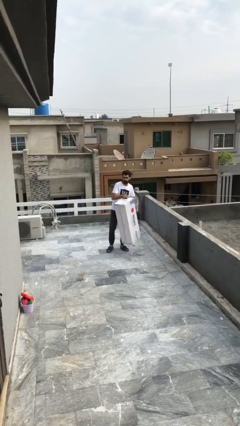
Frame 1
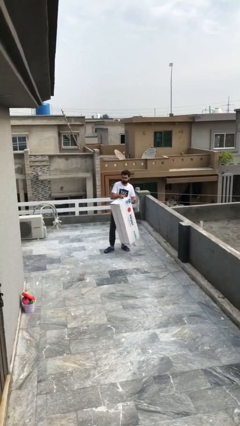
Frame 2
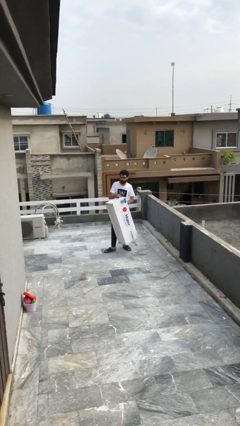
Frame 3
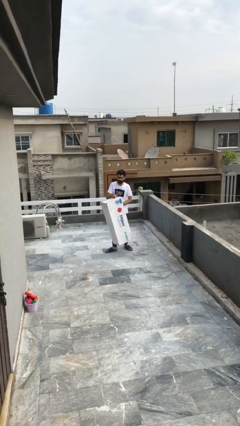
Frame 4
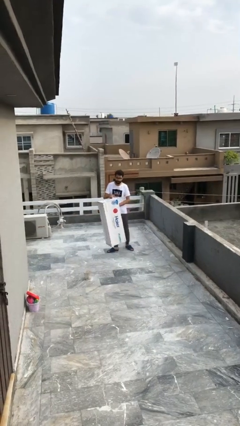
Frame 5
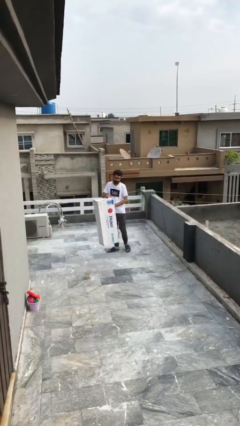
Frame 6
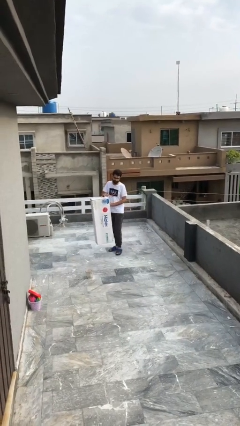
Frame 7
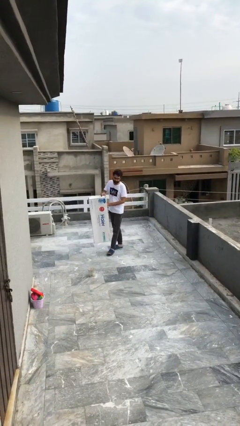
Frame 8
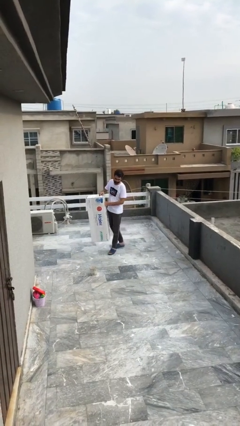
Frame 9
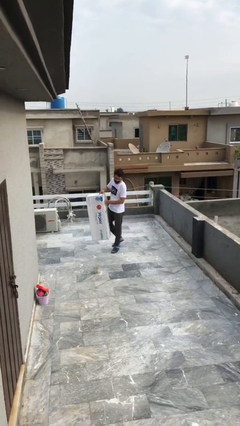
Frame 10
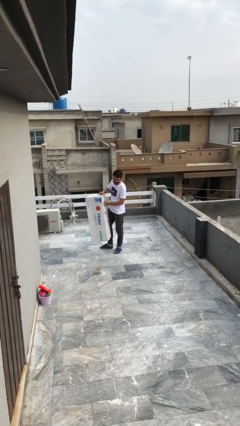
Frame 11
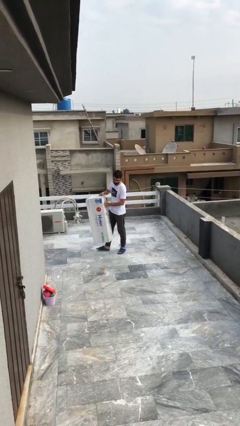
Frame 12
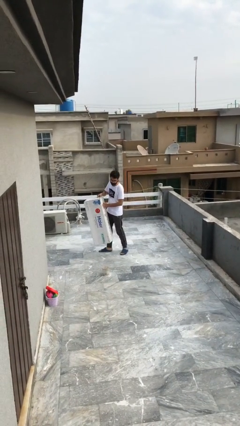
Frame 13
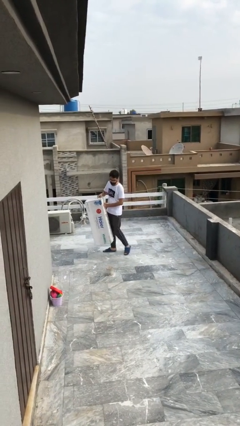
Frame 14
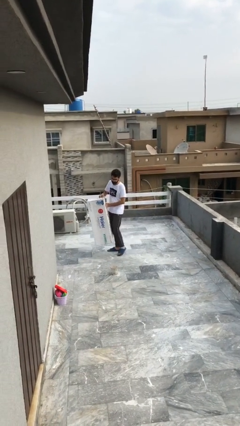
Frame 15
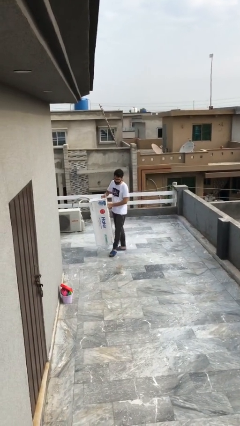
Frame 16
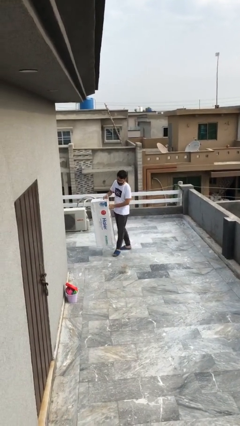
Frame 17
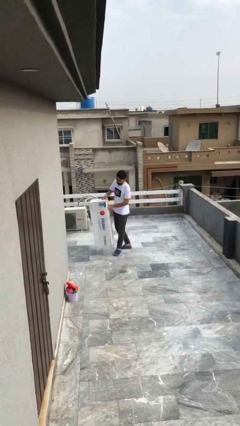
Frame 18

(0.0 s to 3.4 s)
person carries heavy object

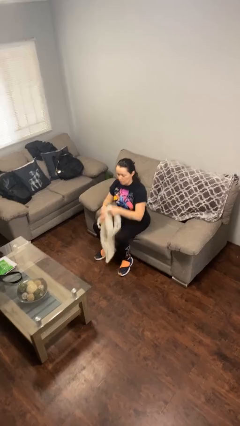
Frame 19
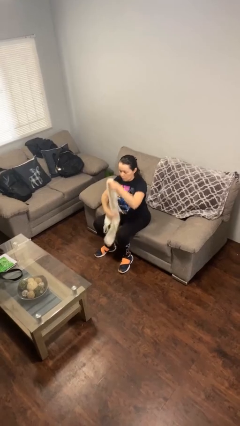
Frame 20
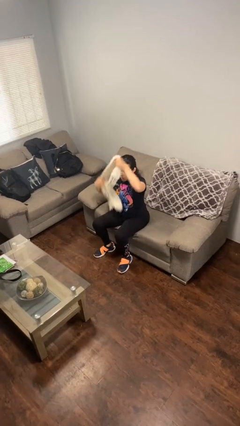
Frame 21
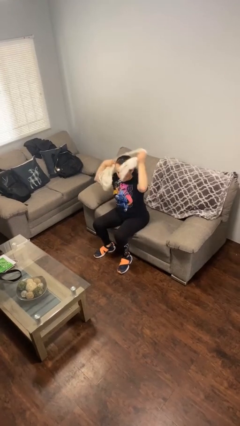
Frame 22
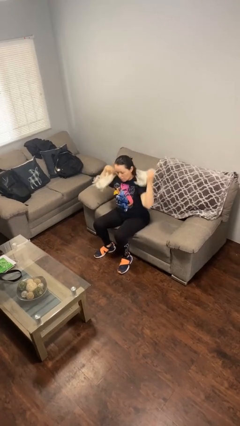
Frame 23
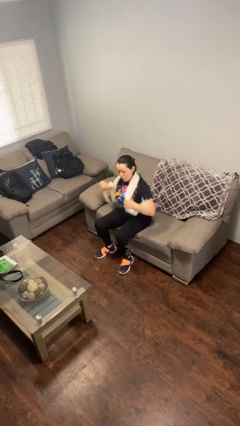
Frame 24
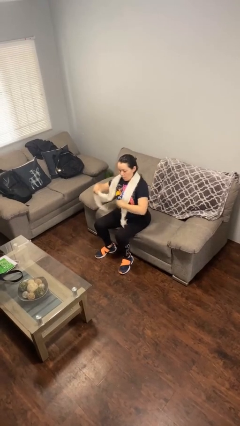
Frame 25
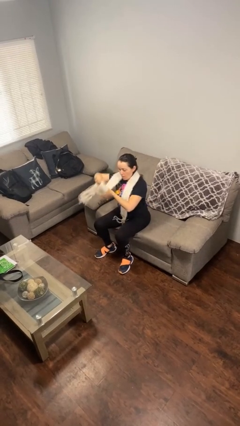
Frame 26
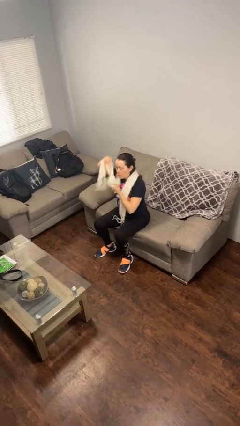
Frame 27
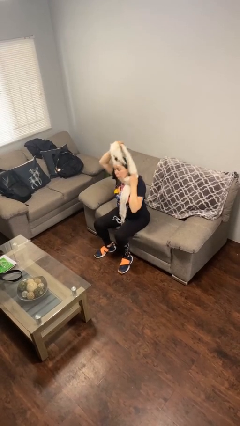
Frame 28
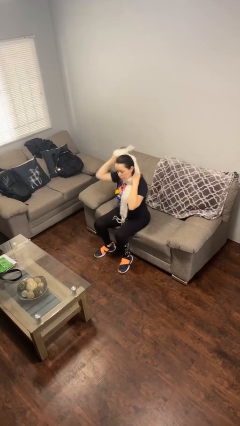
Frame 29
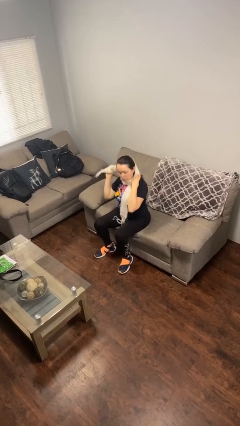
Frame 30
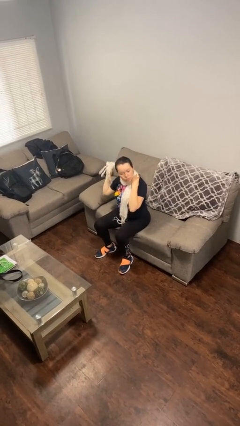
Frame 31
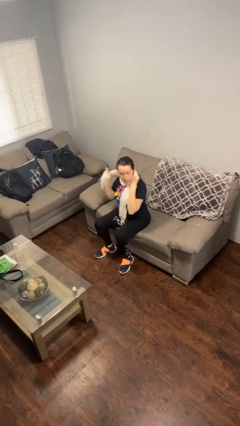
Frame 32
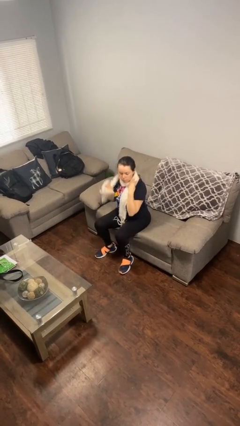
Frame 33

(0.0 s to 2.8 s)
person puts on scarf

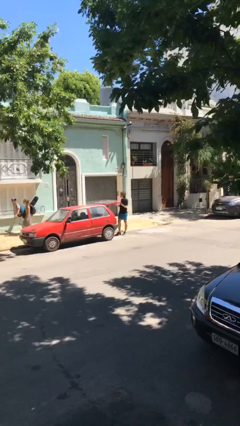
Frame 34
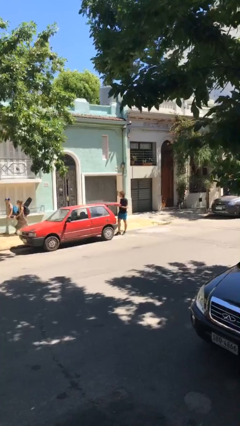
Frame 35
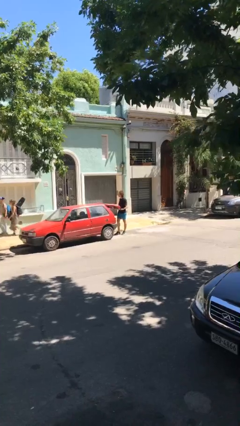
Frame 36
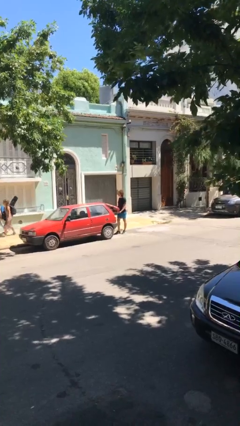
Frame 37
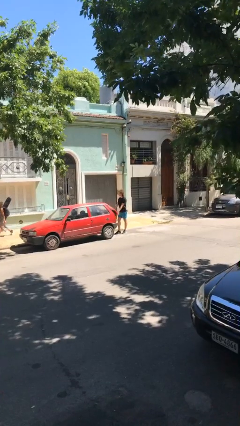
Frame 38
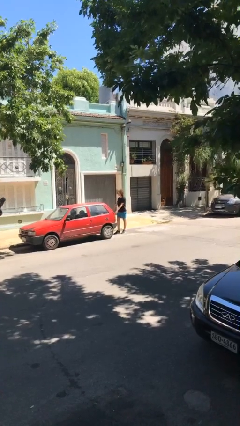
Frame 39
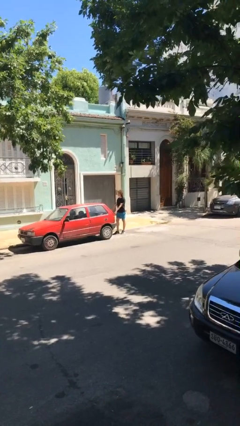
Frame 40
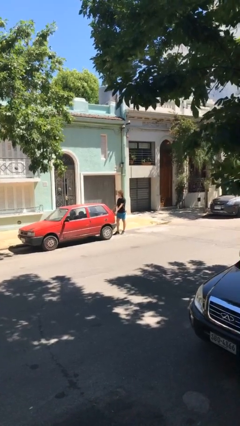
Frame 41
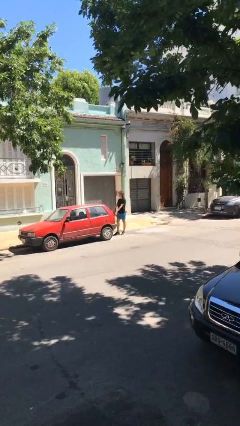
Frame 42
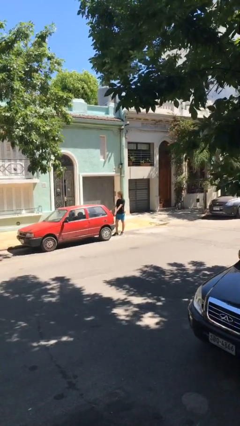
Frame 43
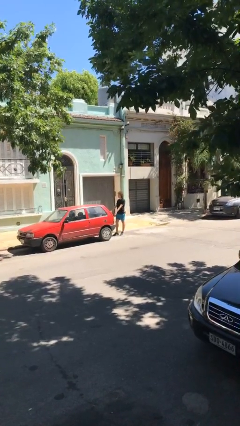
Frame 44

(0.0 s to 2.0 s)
person closes car trunk

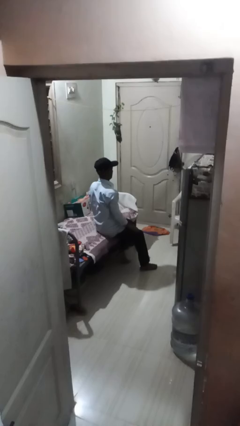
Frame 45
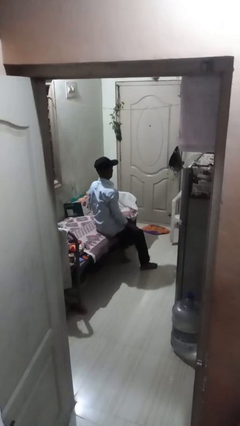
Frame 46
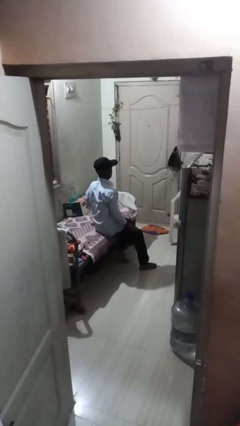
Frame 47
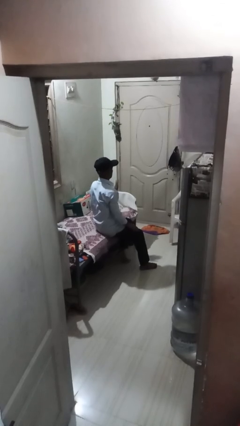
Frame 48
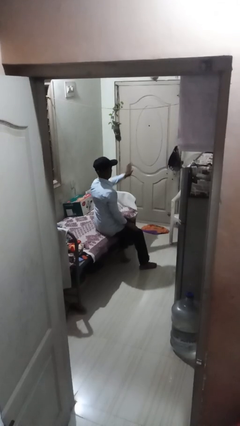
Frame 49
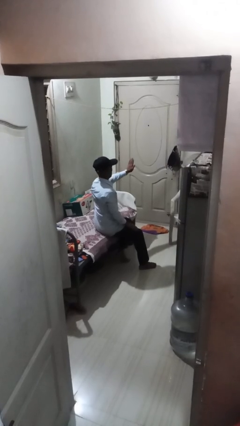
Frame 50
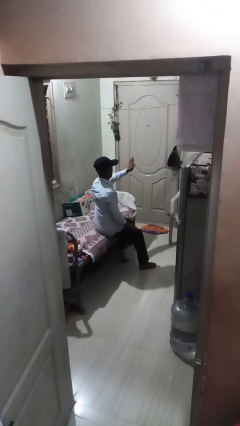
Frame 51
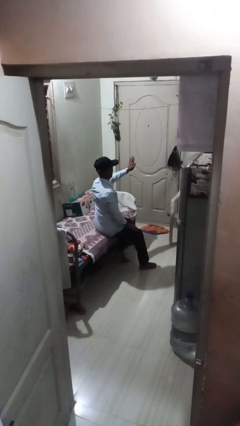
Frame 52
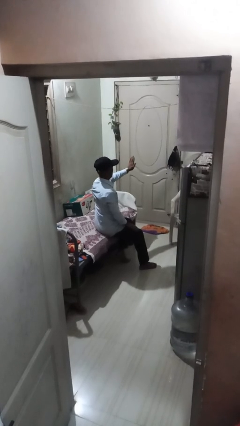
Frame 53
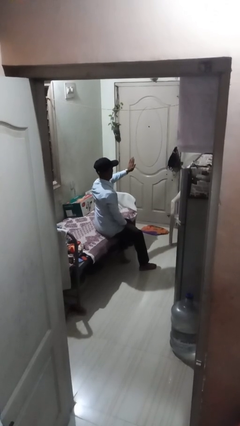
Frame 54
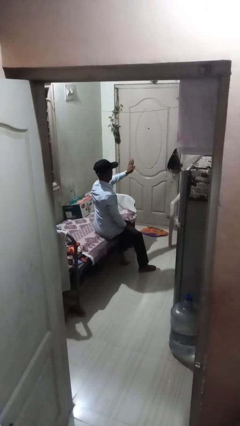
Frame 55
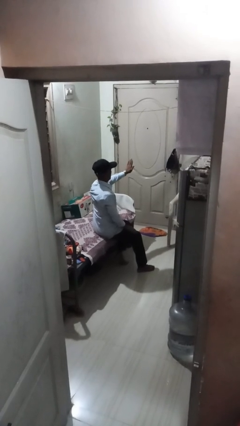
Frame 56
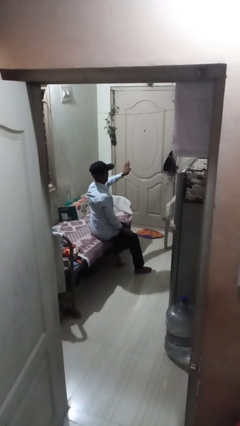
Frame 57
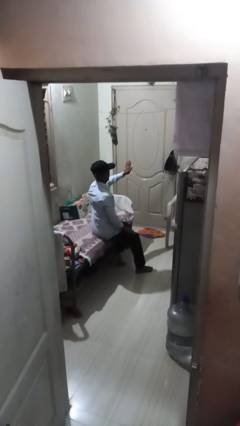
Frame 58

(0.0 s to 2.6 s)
person gestures stop

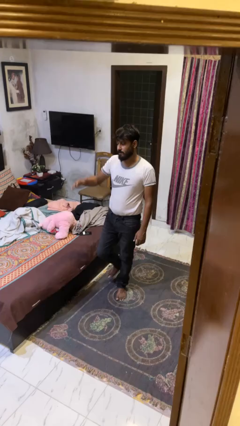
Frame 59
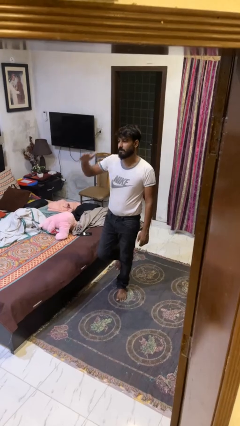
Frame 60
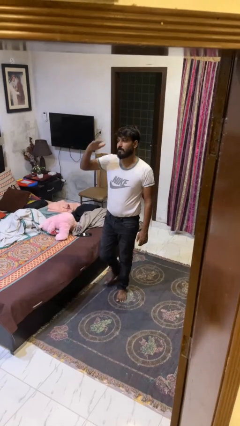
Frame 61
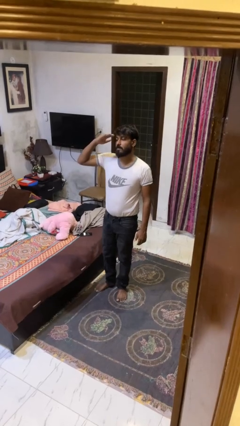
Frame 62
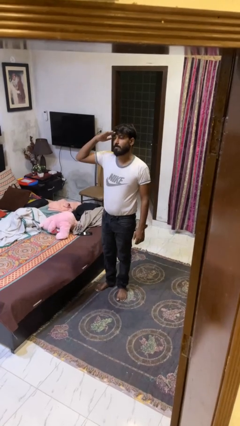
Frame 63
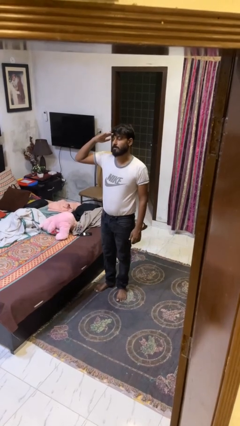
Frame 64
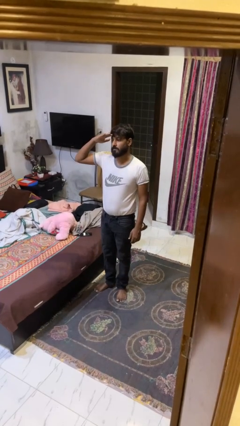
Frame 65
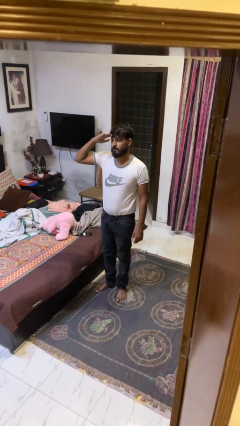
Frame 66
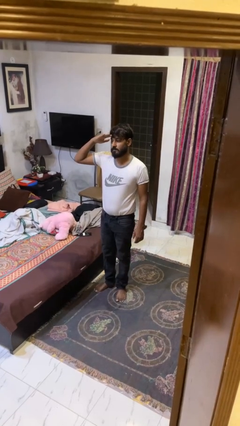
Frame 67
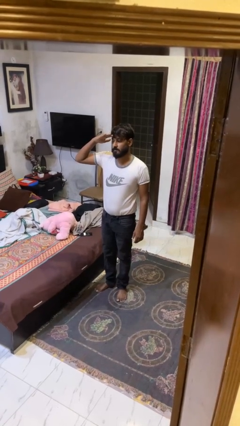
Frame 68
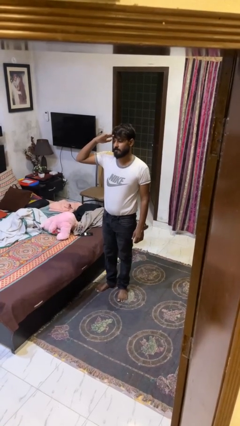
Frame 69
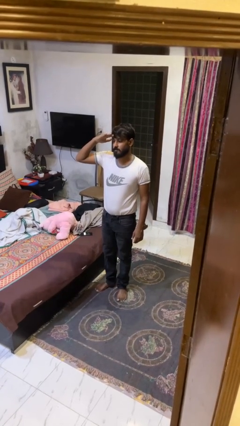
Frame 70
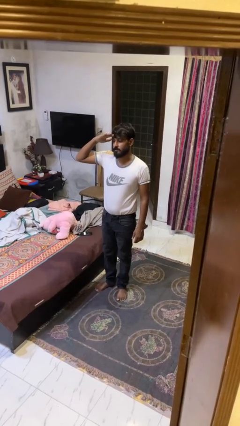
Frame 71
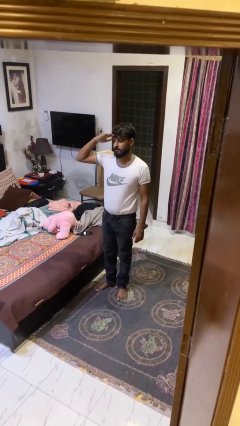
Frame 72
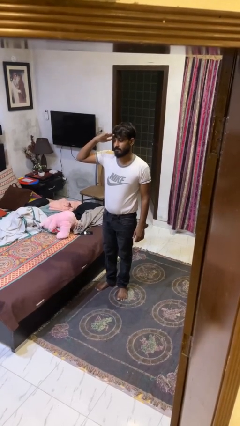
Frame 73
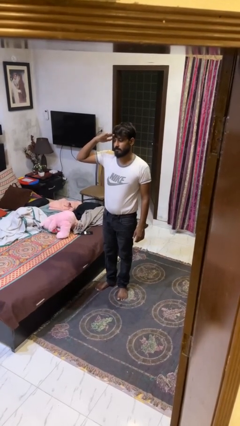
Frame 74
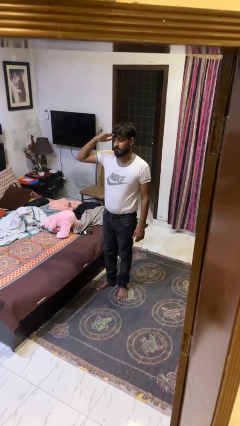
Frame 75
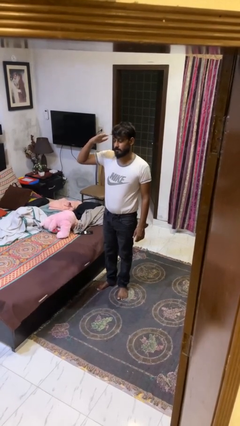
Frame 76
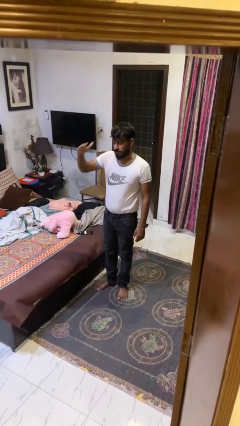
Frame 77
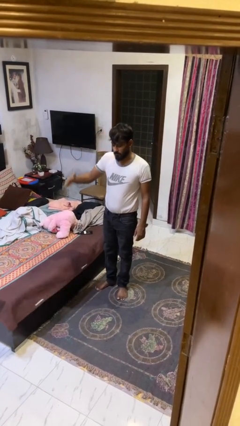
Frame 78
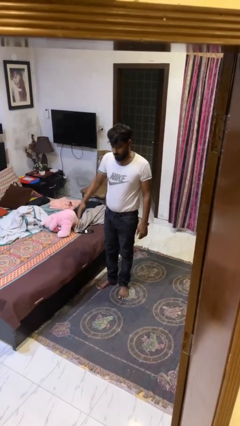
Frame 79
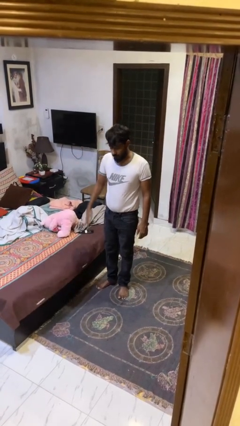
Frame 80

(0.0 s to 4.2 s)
person salutes

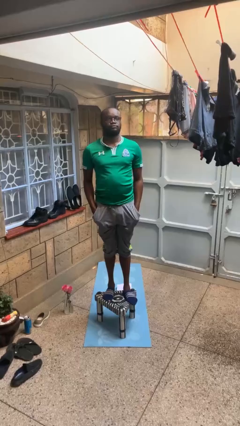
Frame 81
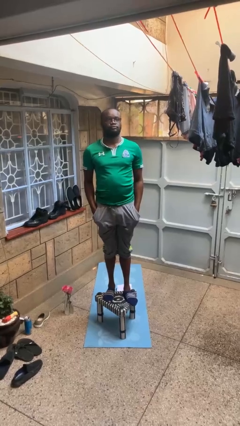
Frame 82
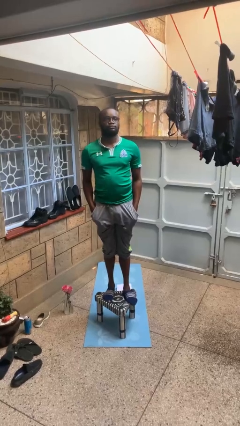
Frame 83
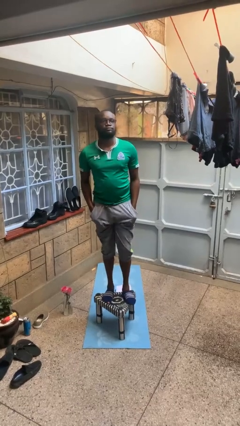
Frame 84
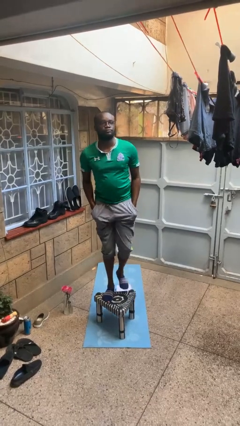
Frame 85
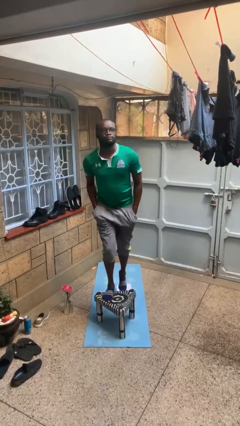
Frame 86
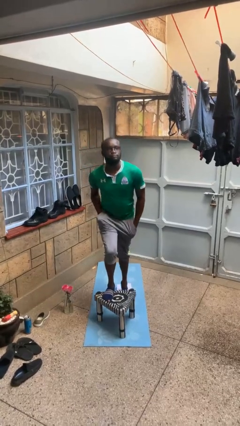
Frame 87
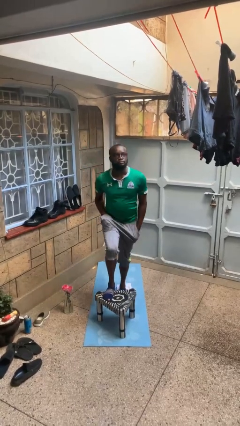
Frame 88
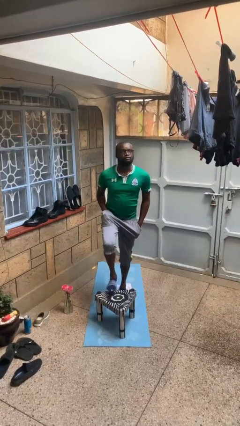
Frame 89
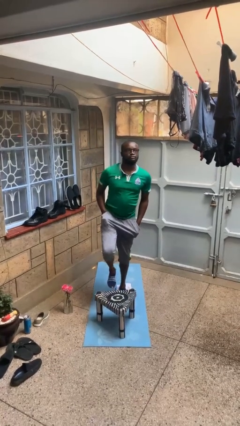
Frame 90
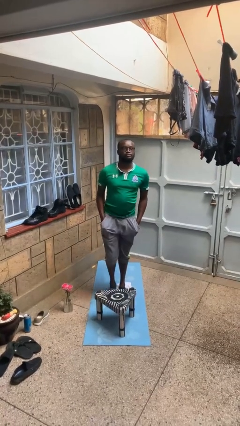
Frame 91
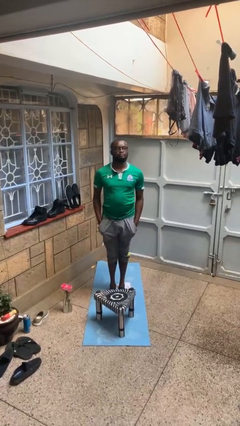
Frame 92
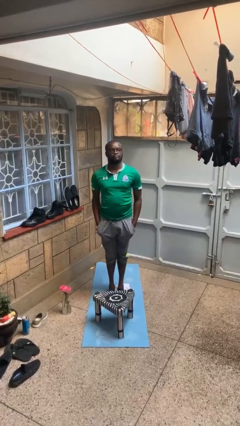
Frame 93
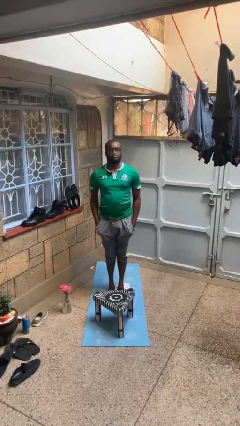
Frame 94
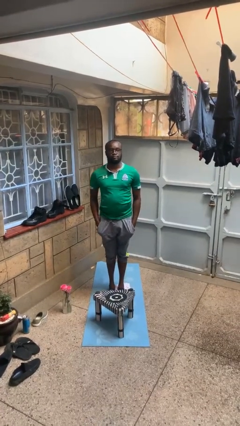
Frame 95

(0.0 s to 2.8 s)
person climbs off table
